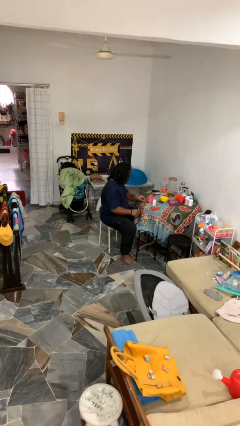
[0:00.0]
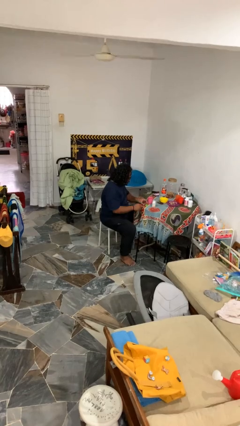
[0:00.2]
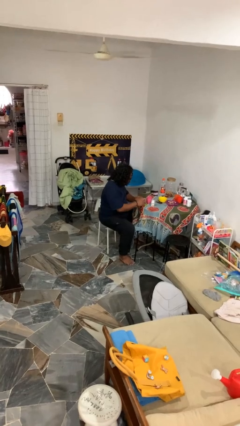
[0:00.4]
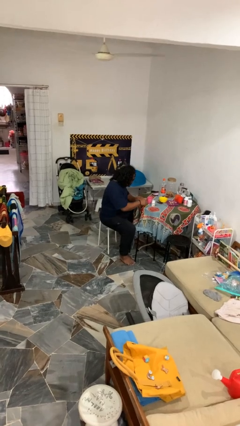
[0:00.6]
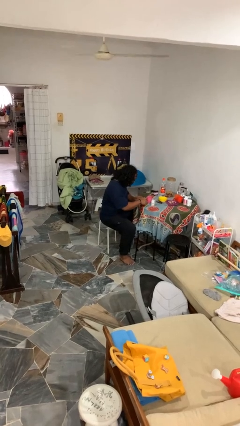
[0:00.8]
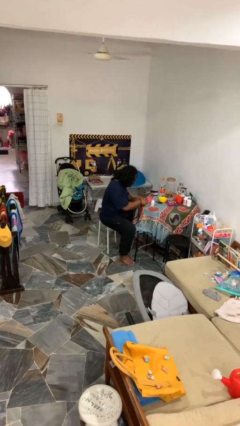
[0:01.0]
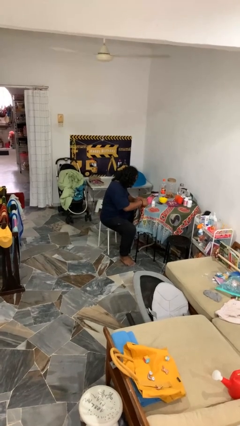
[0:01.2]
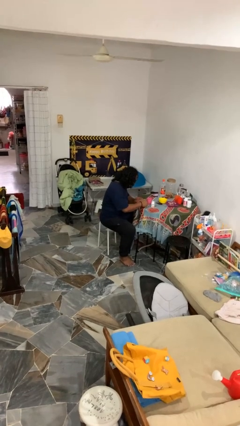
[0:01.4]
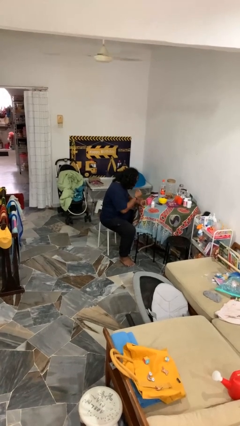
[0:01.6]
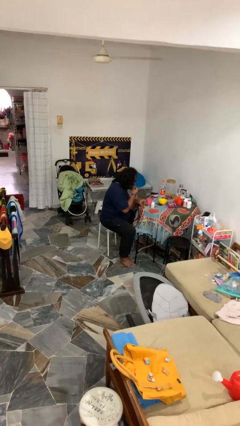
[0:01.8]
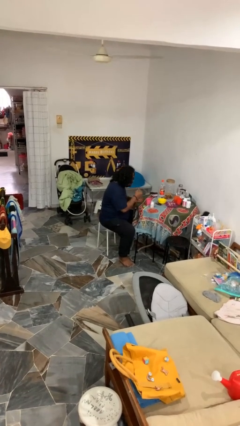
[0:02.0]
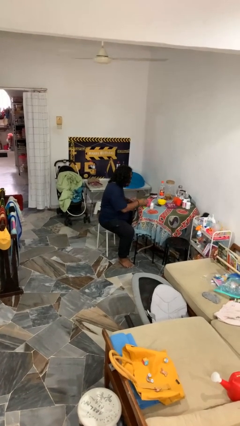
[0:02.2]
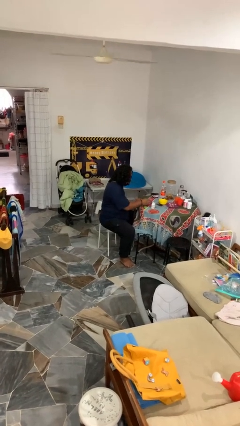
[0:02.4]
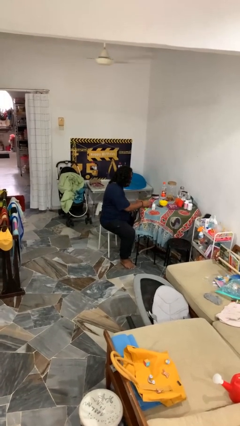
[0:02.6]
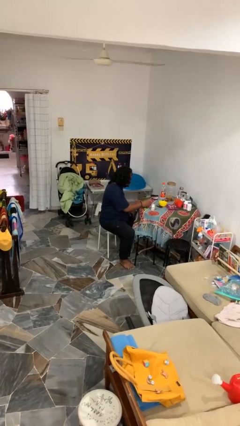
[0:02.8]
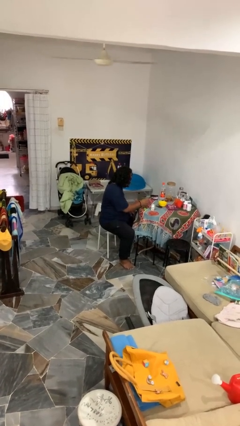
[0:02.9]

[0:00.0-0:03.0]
person takes medicine pills

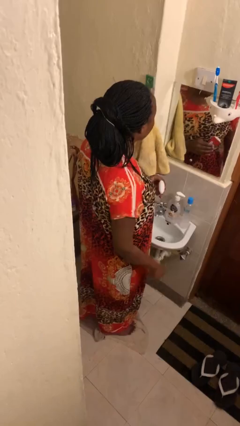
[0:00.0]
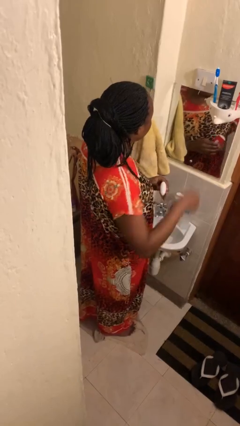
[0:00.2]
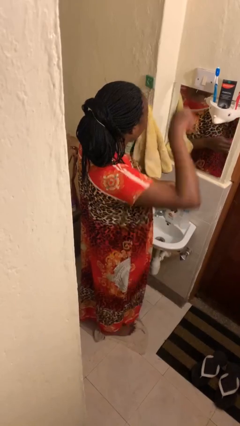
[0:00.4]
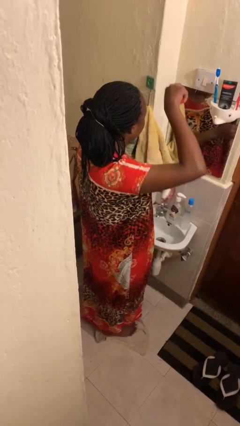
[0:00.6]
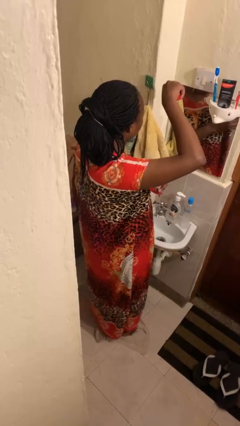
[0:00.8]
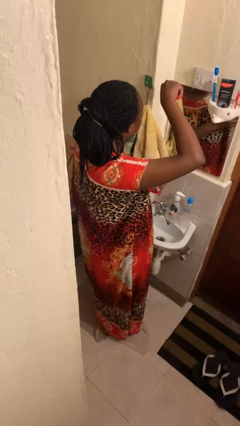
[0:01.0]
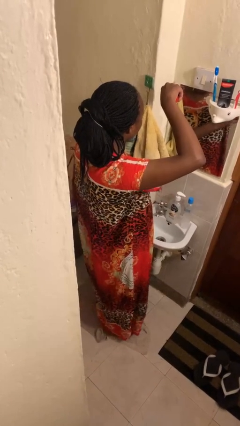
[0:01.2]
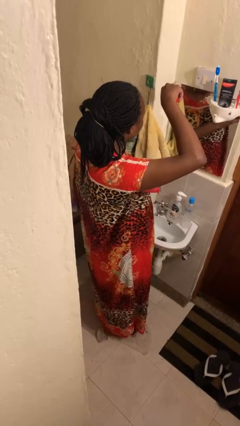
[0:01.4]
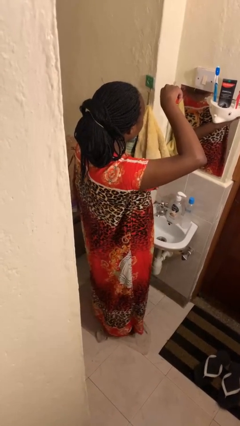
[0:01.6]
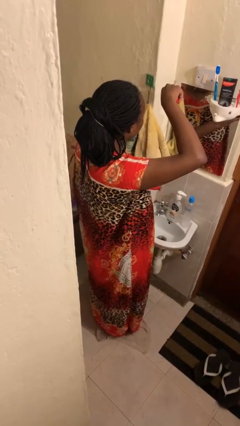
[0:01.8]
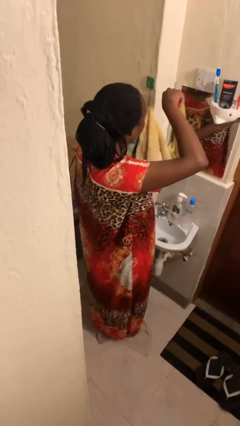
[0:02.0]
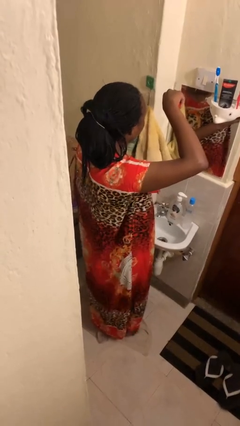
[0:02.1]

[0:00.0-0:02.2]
person applies deodorant

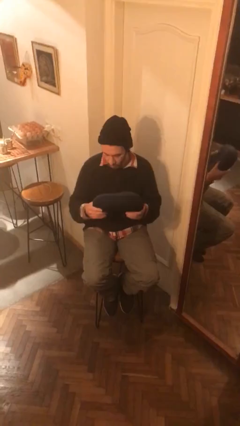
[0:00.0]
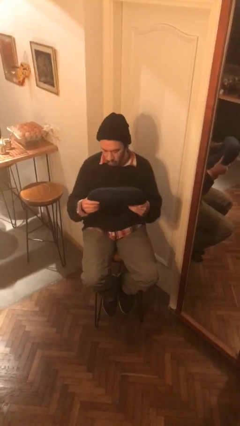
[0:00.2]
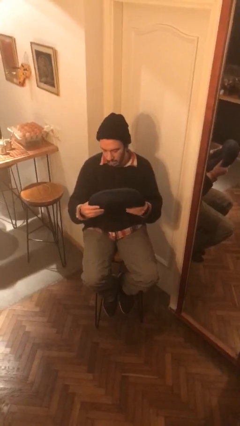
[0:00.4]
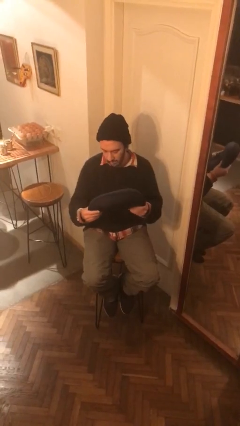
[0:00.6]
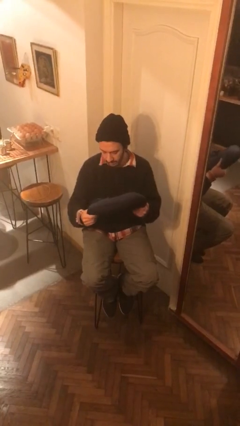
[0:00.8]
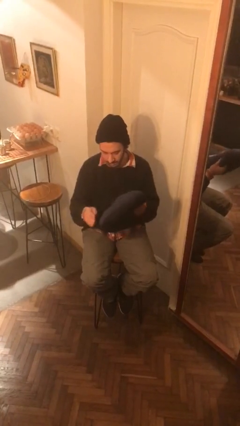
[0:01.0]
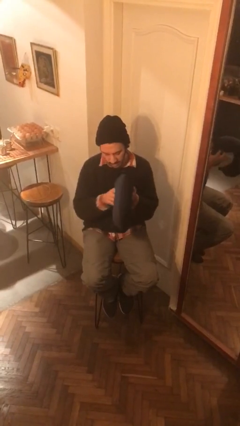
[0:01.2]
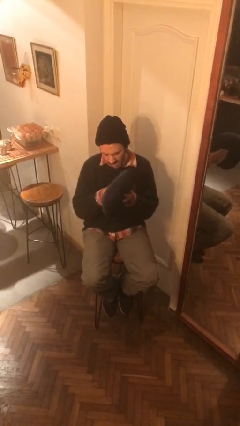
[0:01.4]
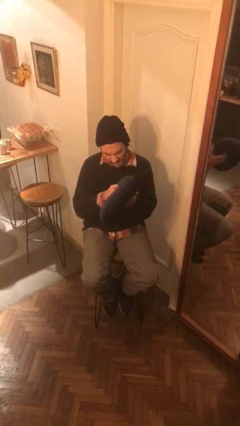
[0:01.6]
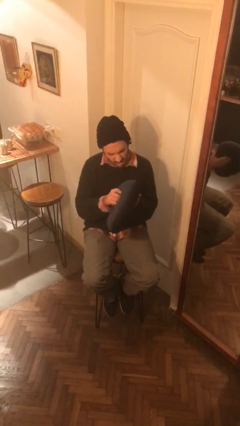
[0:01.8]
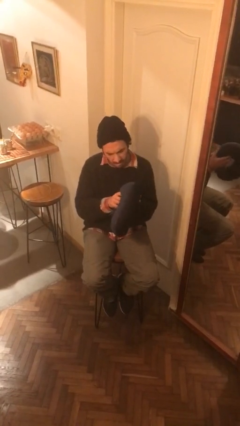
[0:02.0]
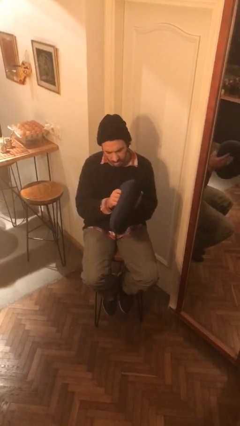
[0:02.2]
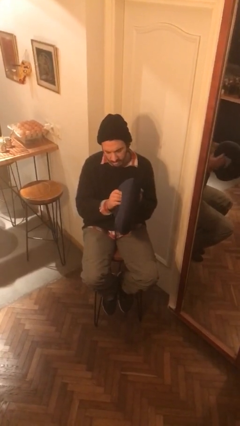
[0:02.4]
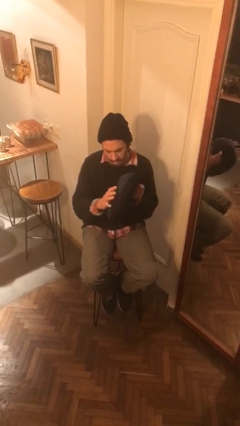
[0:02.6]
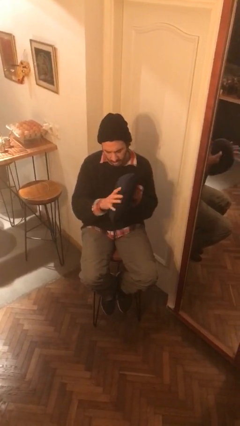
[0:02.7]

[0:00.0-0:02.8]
person squeezes object

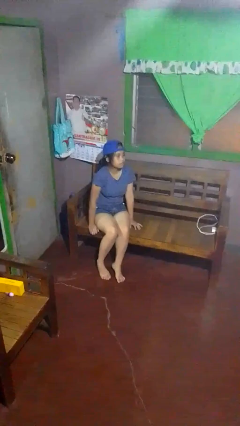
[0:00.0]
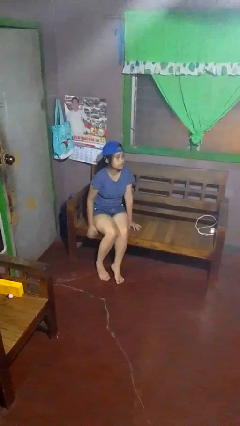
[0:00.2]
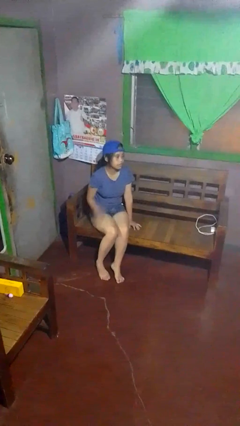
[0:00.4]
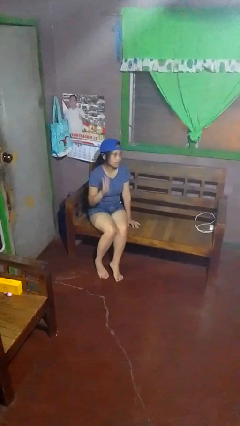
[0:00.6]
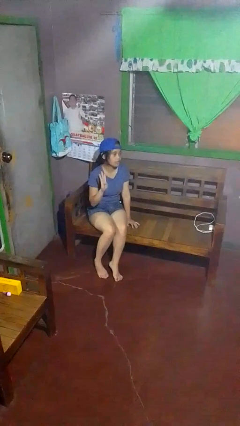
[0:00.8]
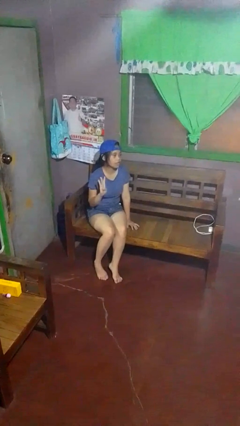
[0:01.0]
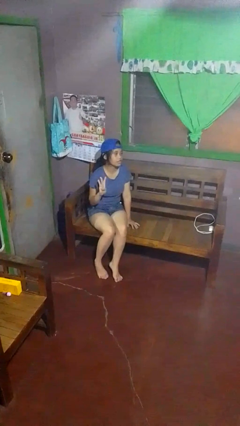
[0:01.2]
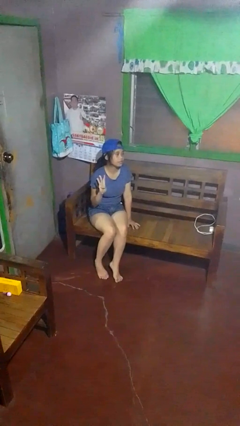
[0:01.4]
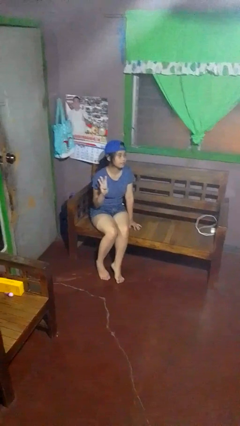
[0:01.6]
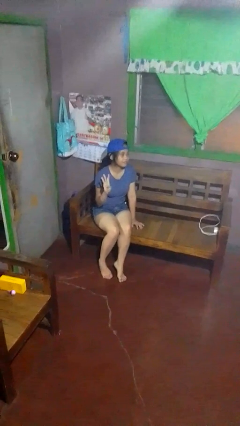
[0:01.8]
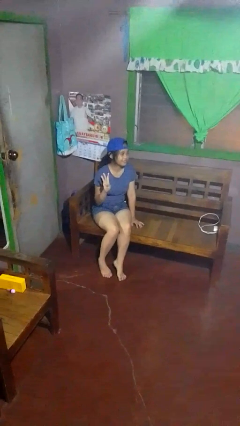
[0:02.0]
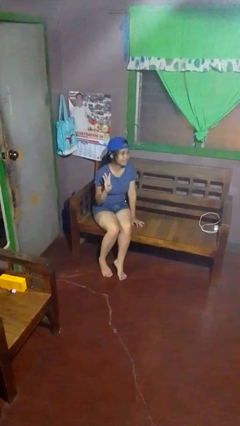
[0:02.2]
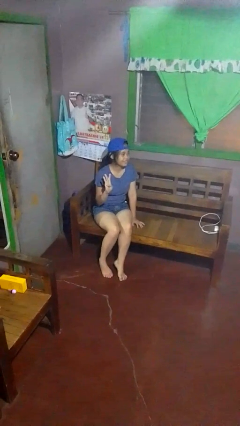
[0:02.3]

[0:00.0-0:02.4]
person gestures number three

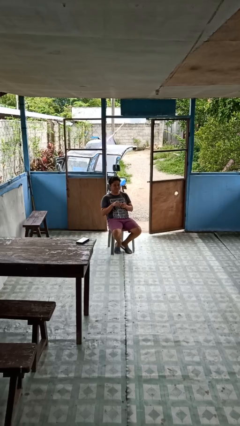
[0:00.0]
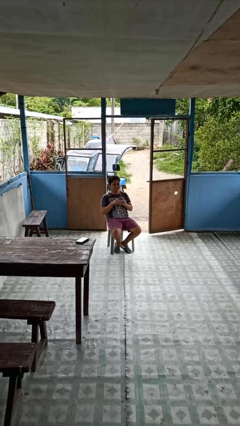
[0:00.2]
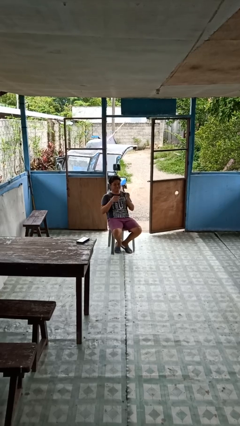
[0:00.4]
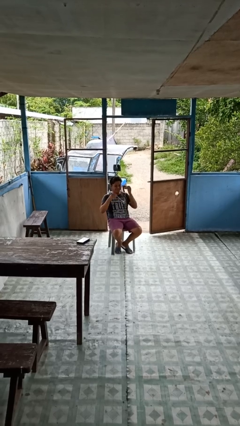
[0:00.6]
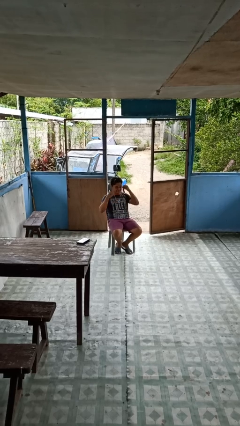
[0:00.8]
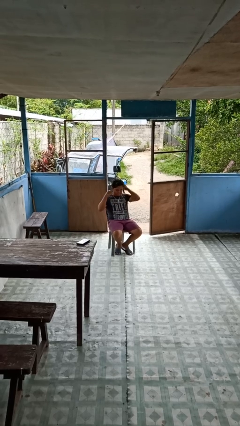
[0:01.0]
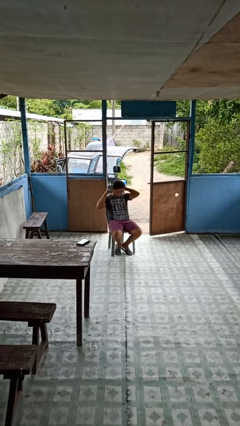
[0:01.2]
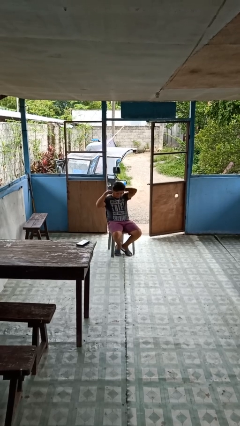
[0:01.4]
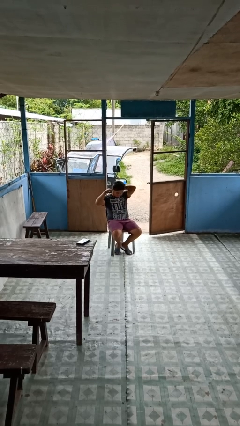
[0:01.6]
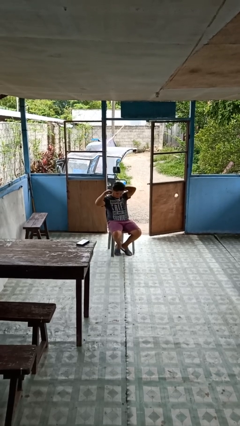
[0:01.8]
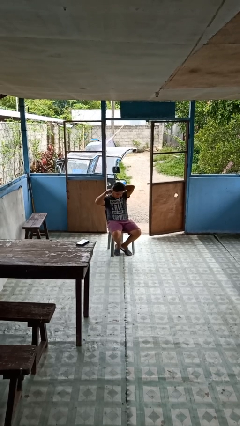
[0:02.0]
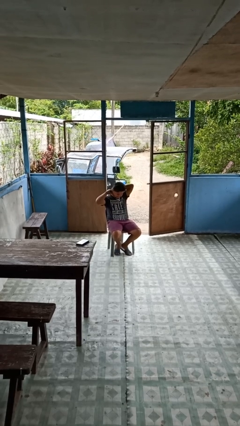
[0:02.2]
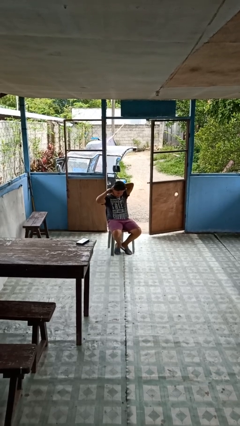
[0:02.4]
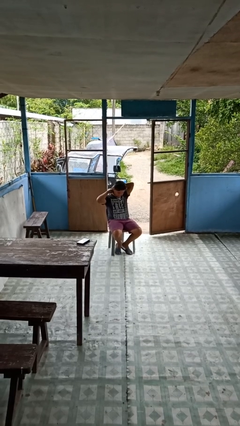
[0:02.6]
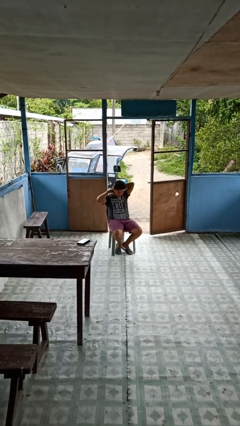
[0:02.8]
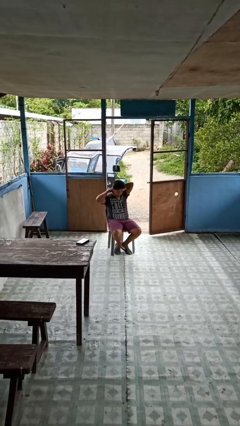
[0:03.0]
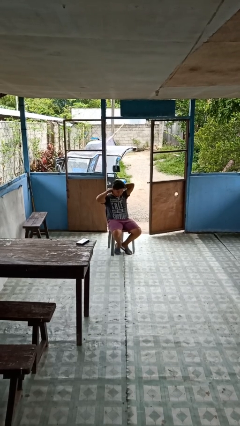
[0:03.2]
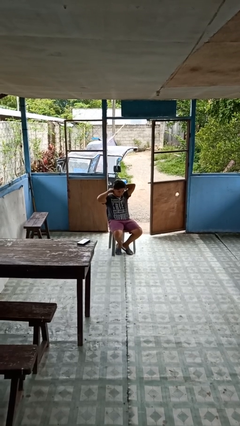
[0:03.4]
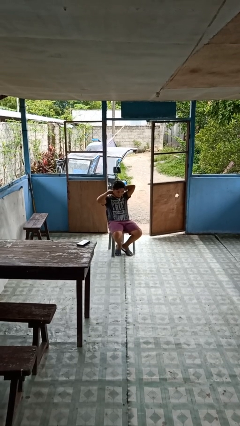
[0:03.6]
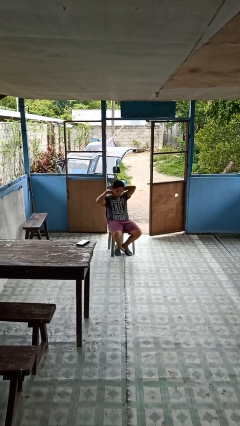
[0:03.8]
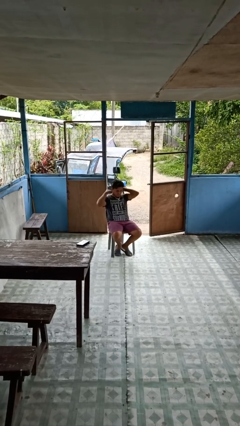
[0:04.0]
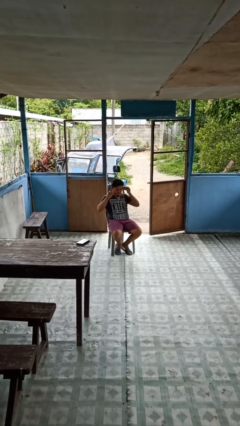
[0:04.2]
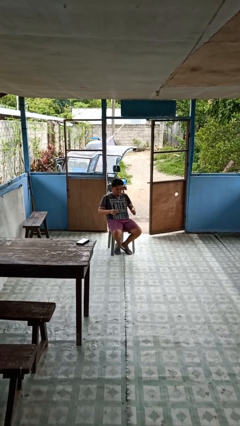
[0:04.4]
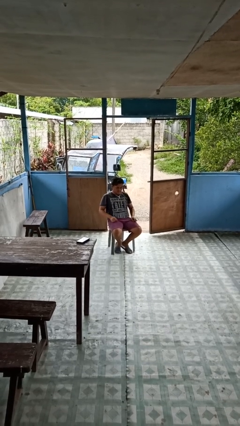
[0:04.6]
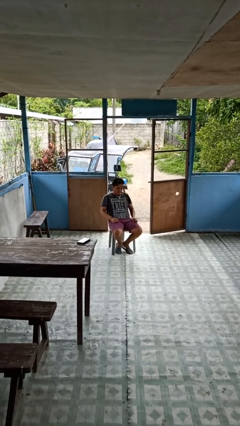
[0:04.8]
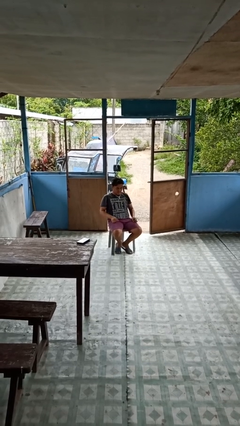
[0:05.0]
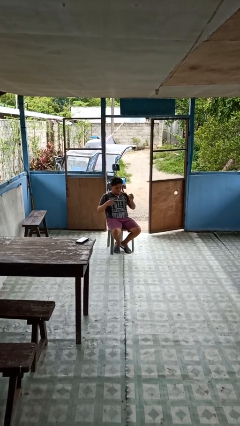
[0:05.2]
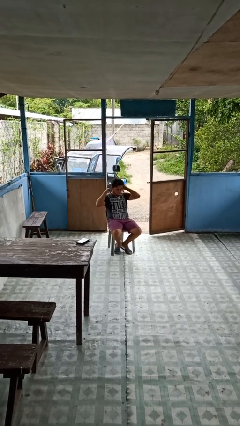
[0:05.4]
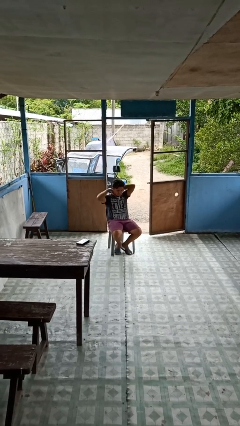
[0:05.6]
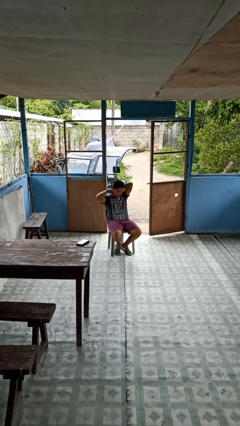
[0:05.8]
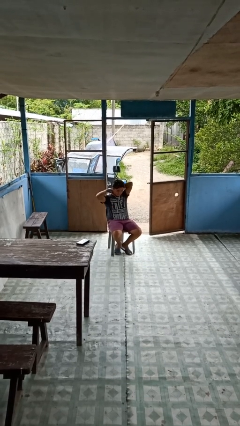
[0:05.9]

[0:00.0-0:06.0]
person puts on necklace

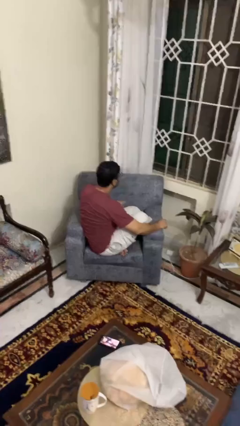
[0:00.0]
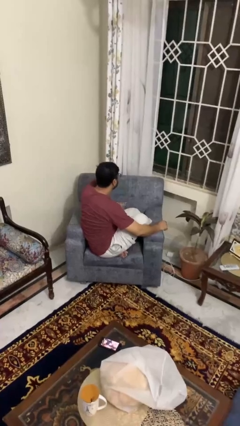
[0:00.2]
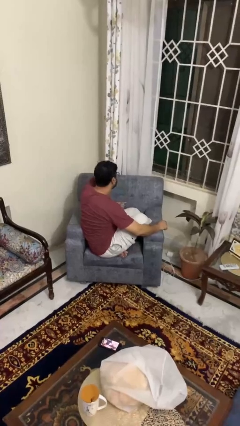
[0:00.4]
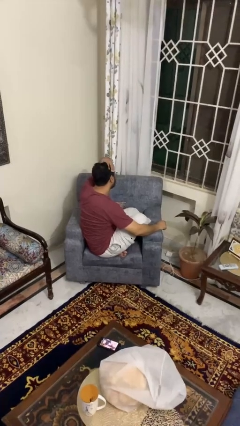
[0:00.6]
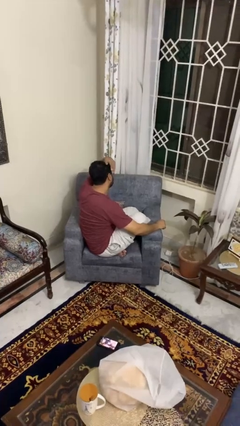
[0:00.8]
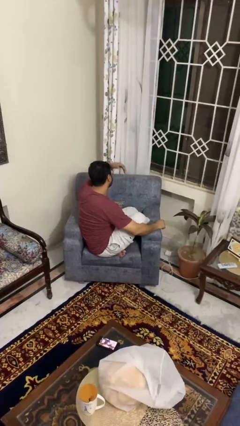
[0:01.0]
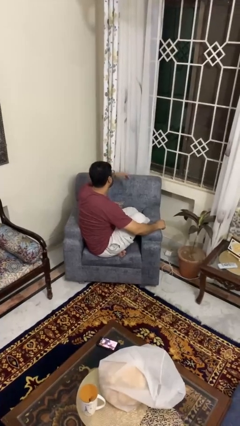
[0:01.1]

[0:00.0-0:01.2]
person strokes hair
